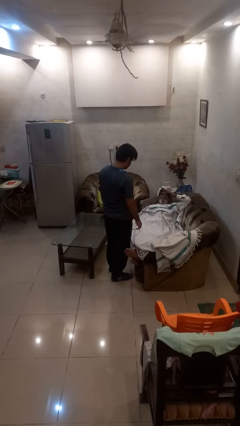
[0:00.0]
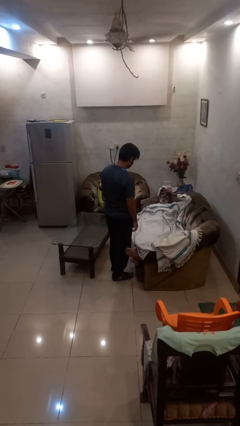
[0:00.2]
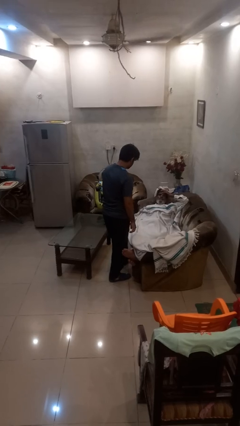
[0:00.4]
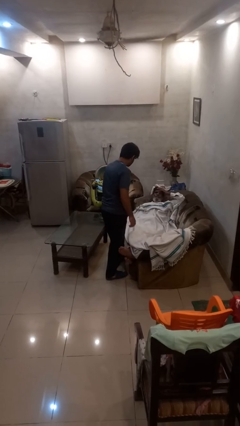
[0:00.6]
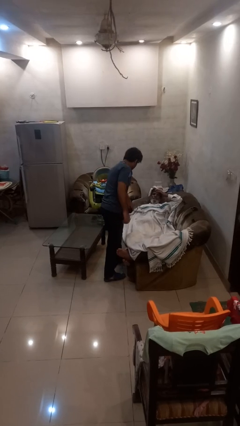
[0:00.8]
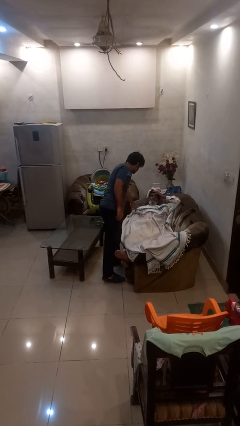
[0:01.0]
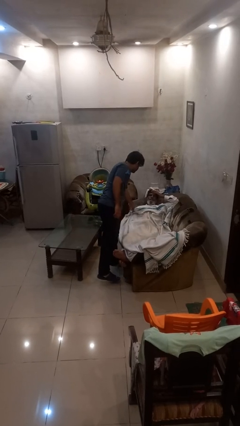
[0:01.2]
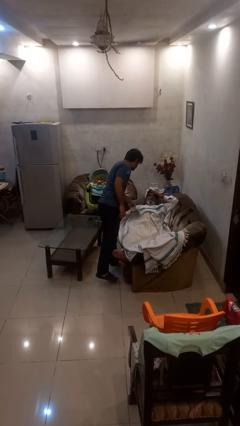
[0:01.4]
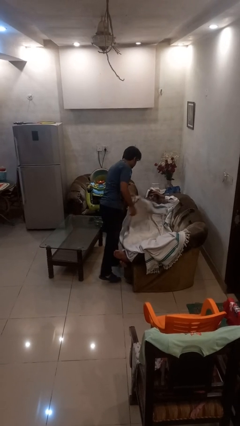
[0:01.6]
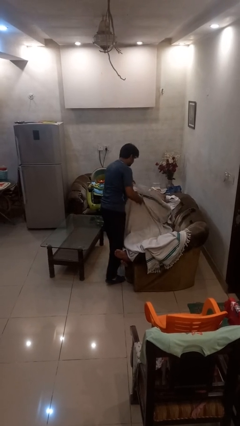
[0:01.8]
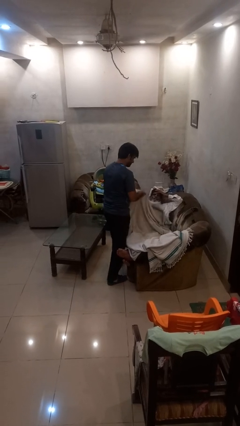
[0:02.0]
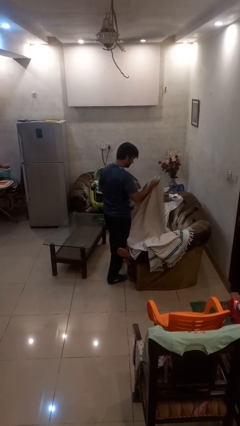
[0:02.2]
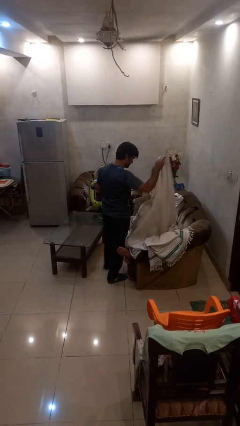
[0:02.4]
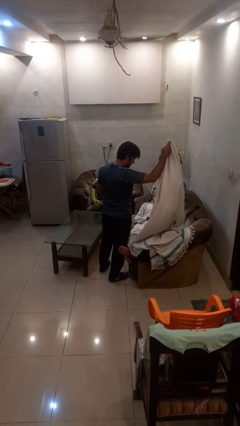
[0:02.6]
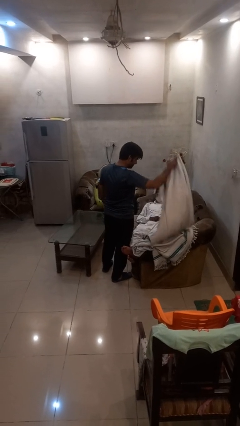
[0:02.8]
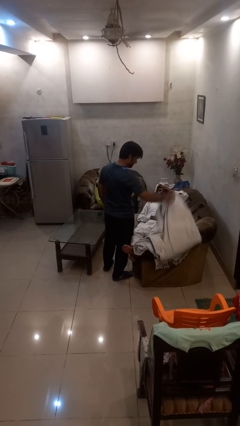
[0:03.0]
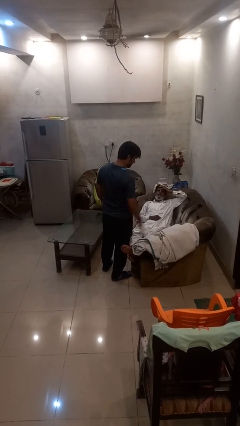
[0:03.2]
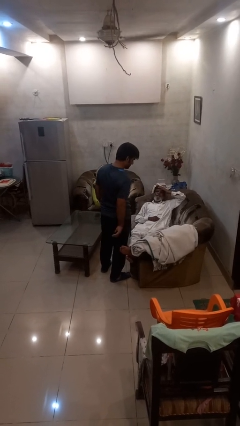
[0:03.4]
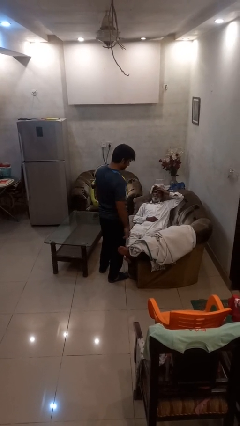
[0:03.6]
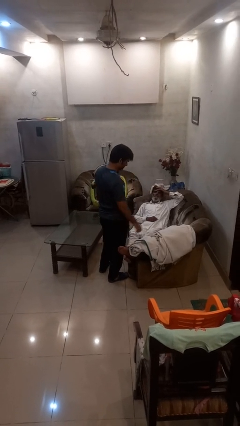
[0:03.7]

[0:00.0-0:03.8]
person uncovers friend with blanket

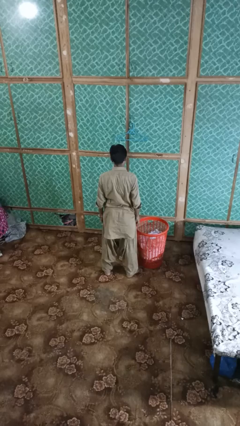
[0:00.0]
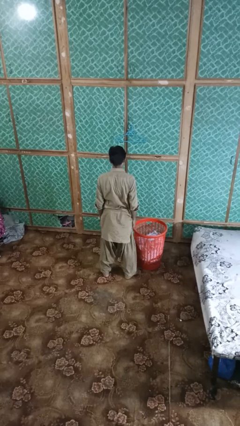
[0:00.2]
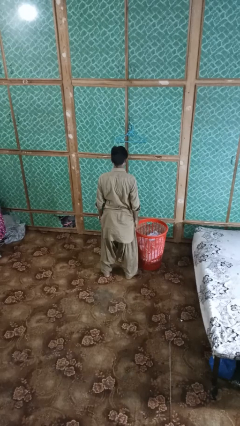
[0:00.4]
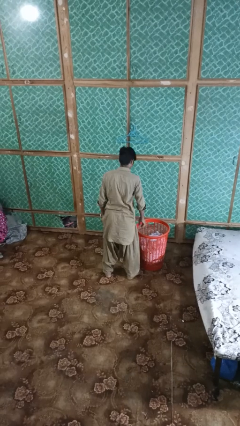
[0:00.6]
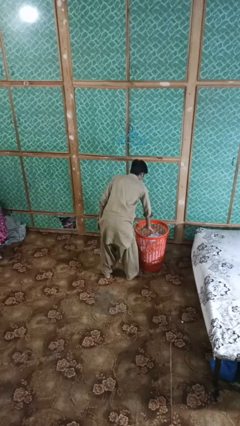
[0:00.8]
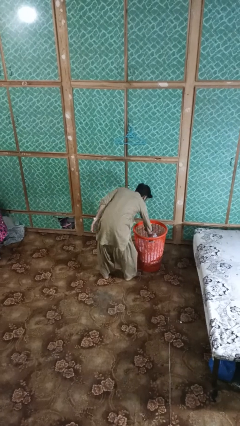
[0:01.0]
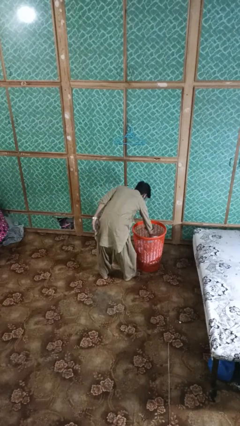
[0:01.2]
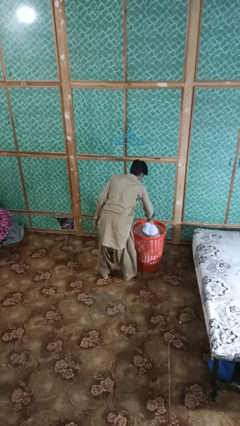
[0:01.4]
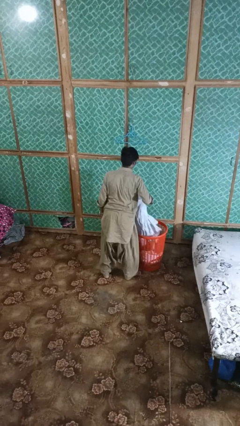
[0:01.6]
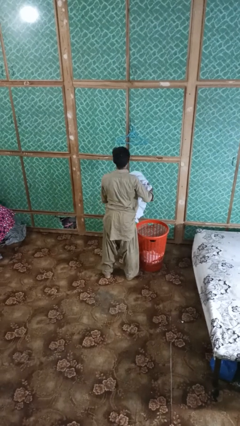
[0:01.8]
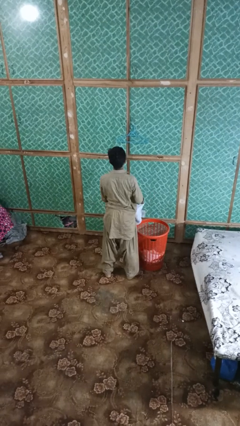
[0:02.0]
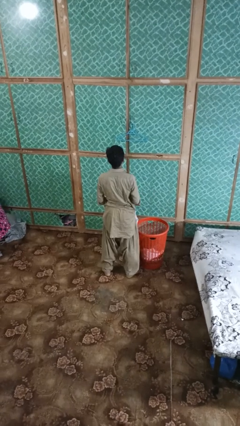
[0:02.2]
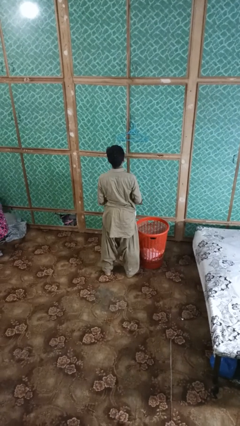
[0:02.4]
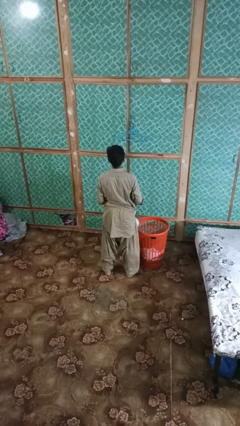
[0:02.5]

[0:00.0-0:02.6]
person takes object from basket

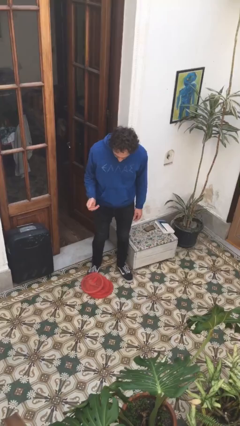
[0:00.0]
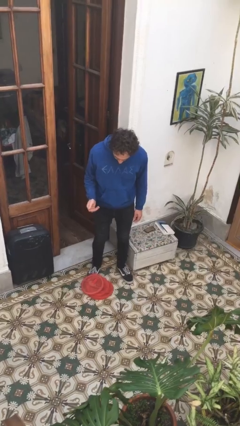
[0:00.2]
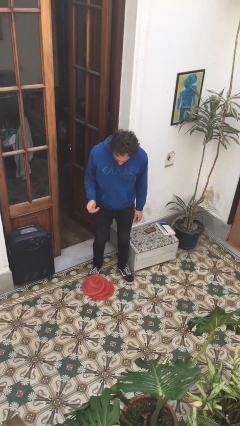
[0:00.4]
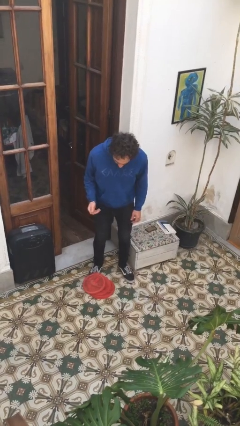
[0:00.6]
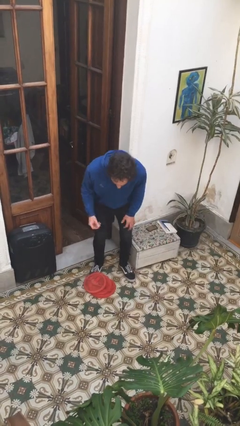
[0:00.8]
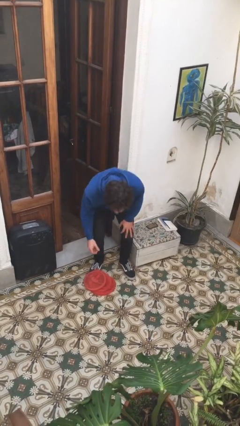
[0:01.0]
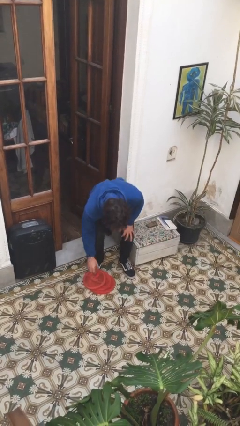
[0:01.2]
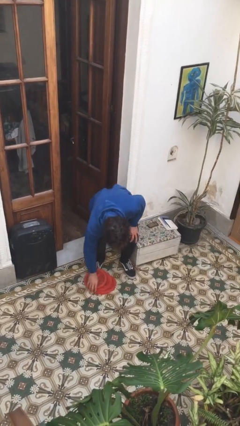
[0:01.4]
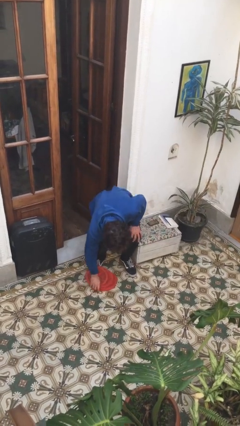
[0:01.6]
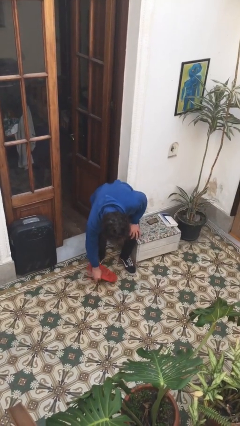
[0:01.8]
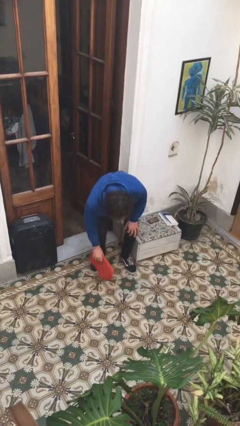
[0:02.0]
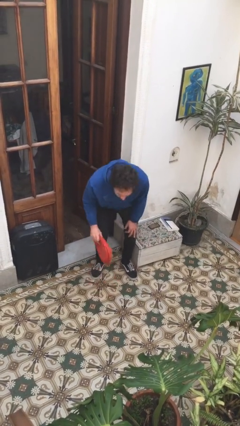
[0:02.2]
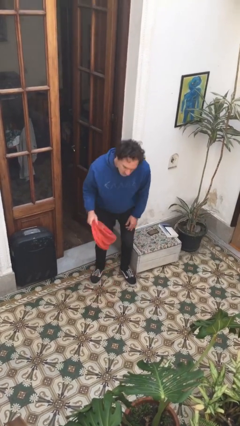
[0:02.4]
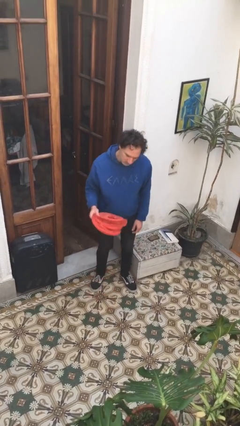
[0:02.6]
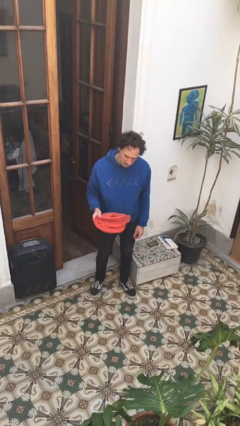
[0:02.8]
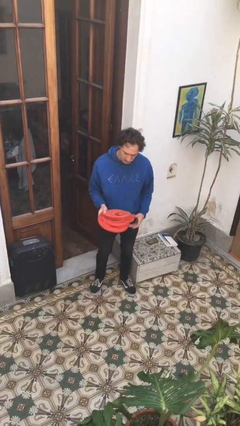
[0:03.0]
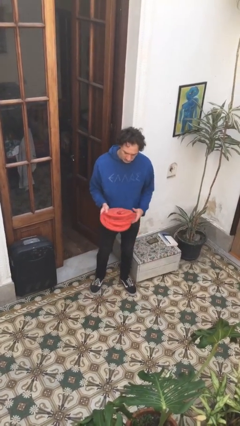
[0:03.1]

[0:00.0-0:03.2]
person picks up object from floor

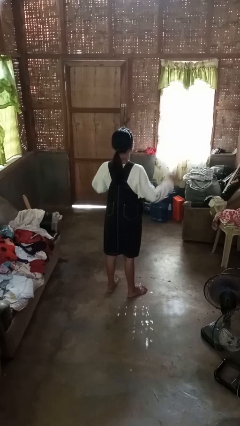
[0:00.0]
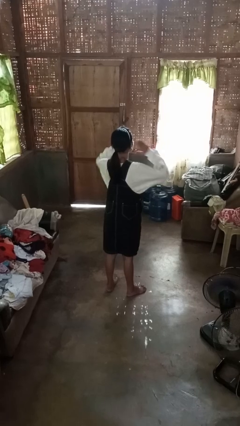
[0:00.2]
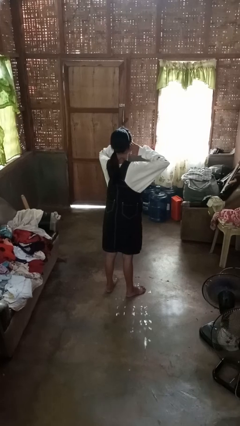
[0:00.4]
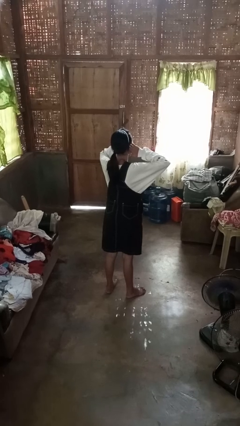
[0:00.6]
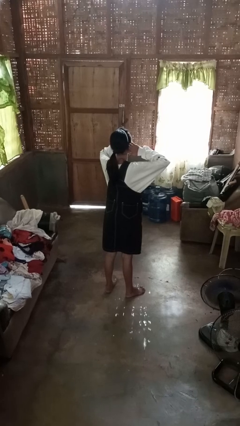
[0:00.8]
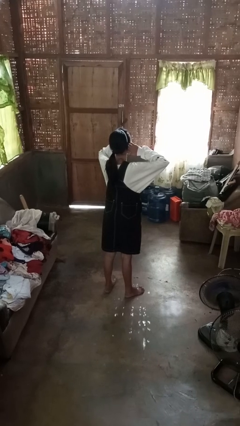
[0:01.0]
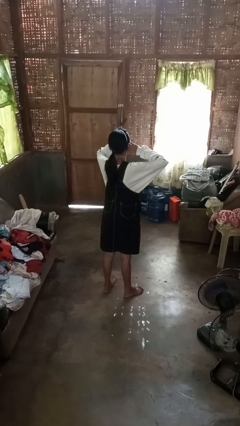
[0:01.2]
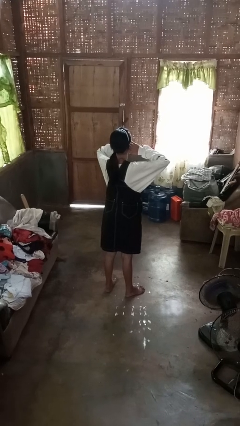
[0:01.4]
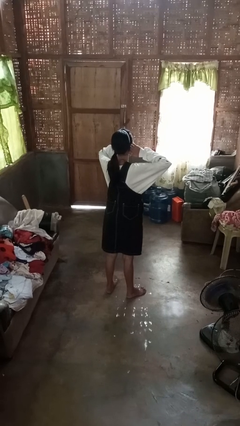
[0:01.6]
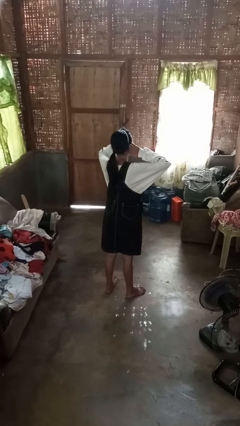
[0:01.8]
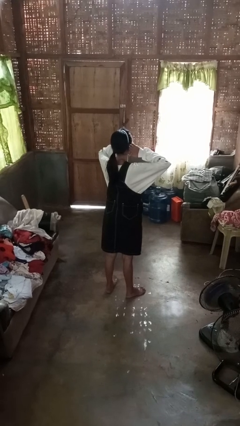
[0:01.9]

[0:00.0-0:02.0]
person puts fingers in ear

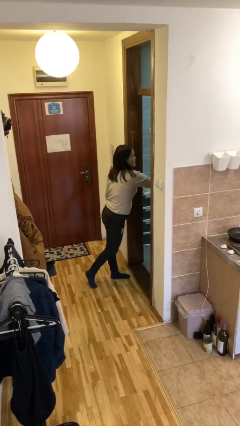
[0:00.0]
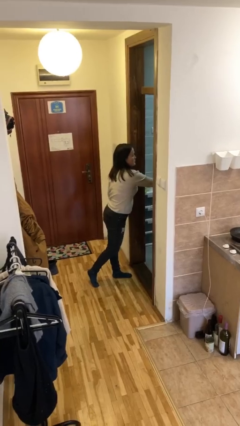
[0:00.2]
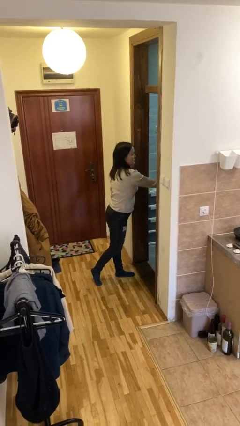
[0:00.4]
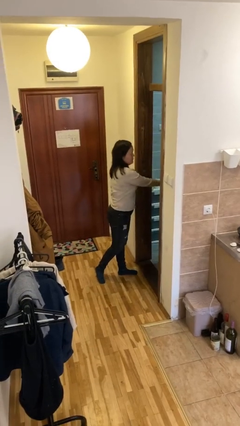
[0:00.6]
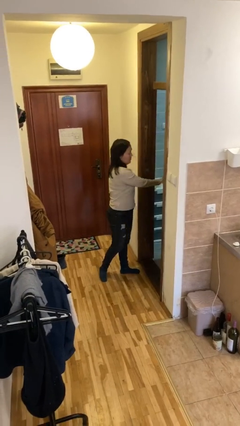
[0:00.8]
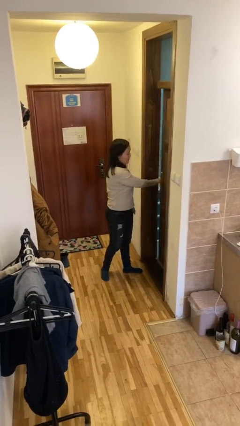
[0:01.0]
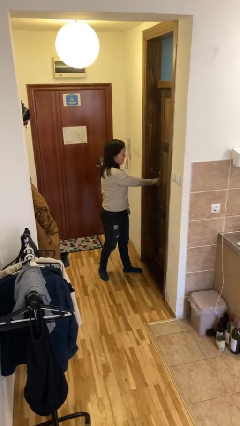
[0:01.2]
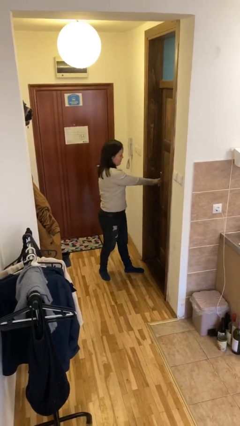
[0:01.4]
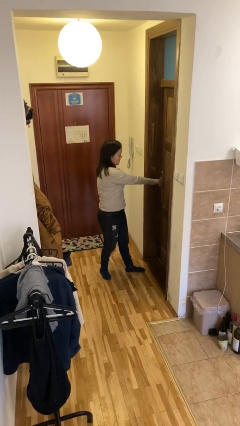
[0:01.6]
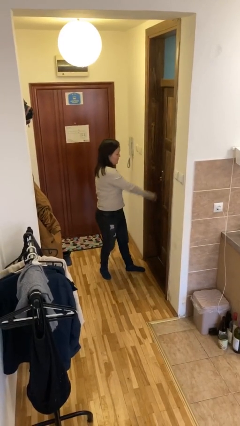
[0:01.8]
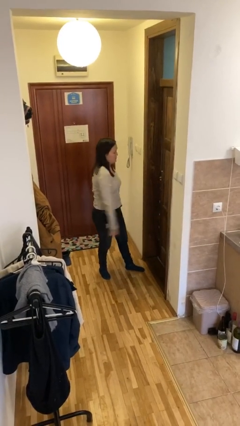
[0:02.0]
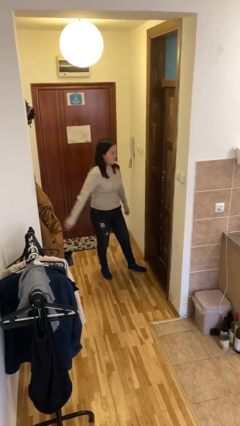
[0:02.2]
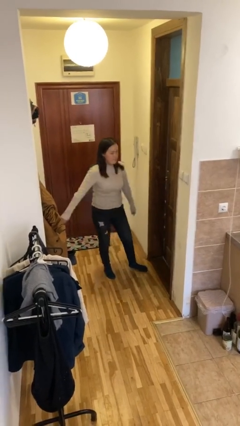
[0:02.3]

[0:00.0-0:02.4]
person closes facility door

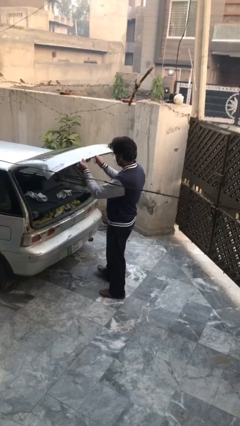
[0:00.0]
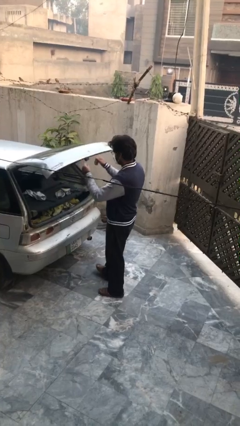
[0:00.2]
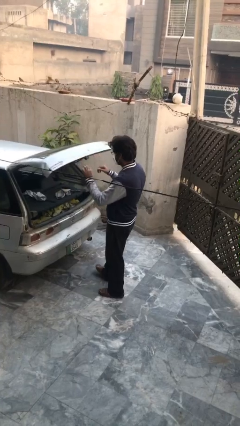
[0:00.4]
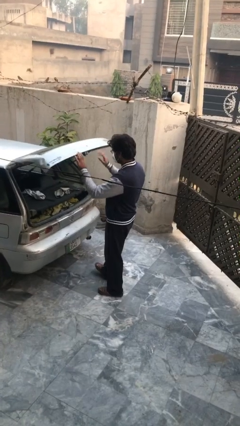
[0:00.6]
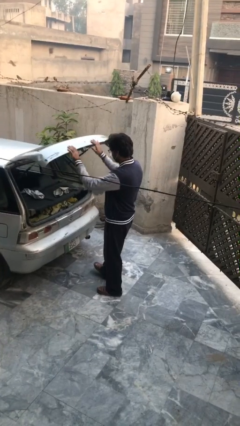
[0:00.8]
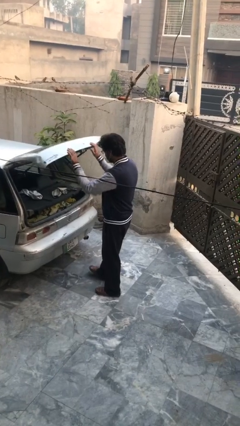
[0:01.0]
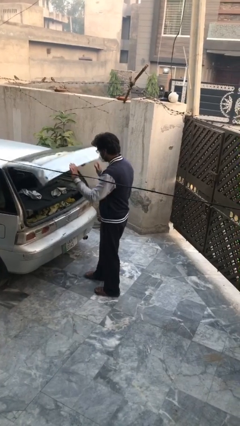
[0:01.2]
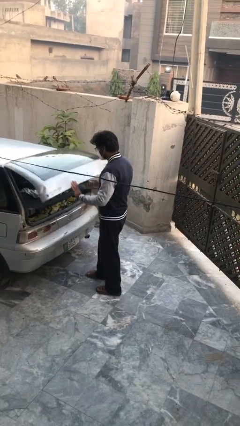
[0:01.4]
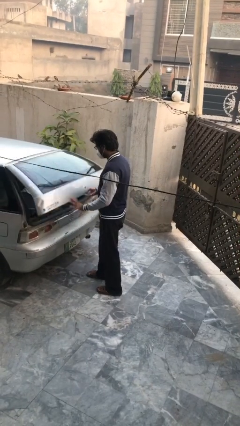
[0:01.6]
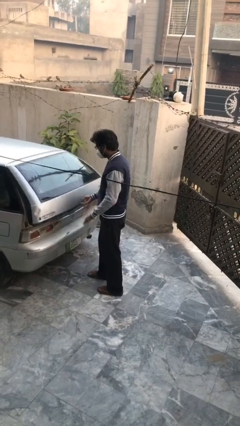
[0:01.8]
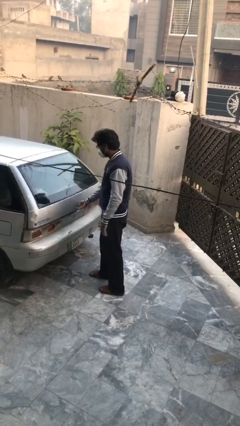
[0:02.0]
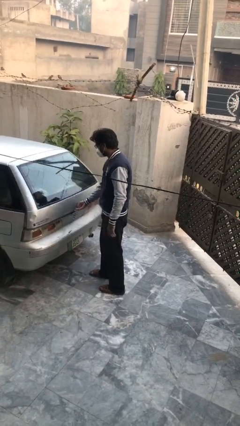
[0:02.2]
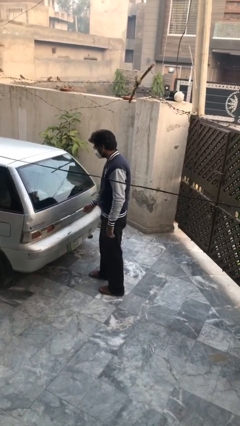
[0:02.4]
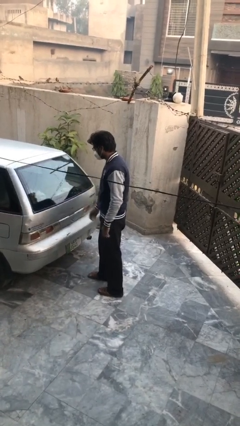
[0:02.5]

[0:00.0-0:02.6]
person closes car trunk

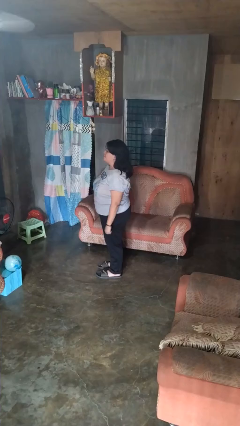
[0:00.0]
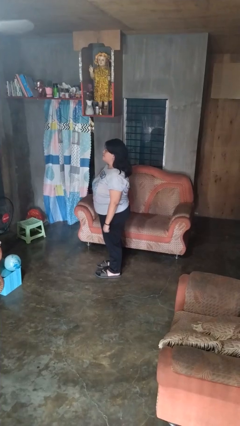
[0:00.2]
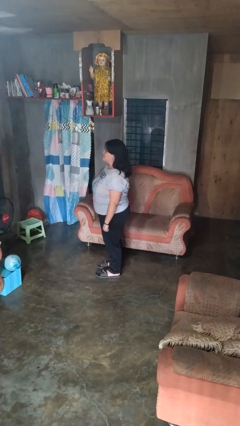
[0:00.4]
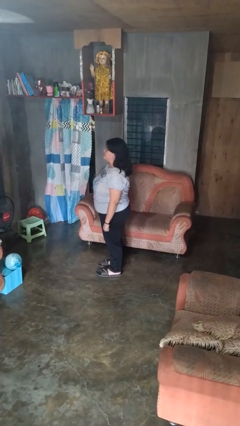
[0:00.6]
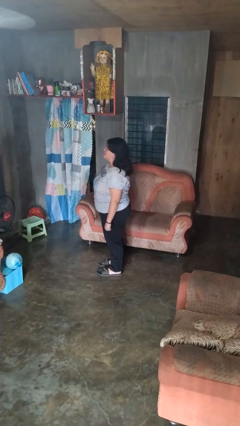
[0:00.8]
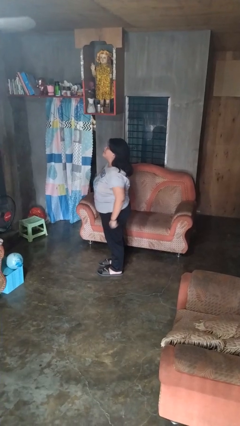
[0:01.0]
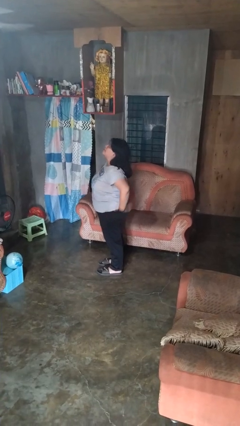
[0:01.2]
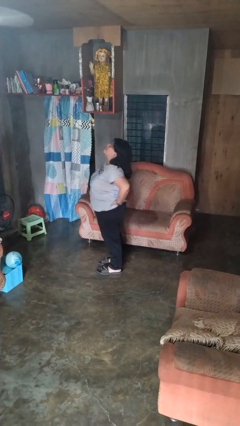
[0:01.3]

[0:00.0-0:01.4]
person stretches back
